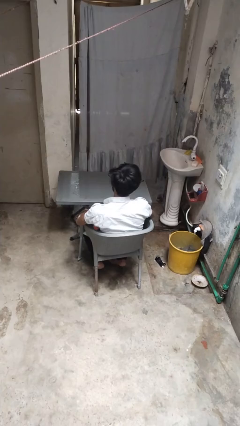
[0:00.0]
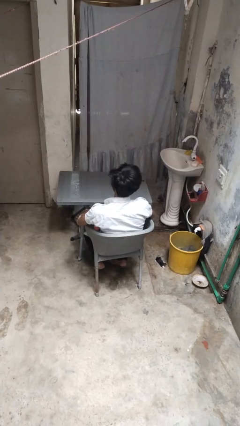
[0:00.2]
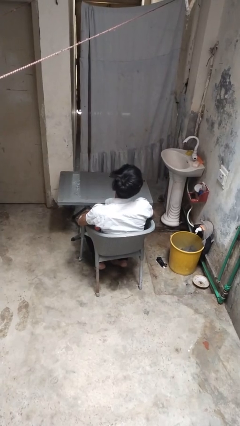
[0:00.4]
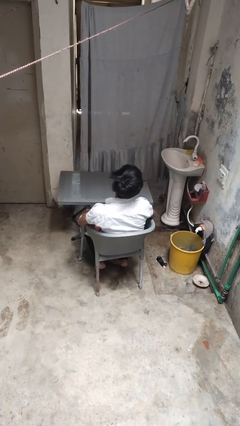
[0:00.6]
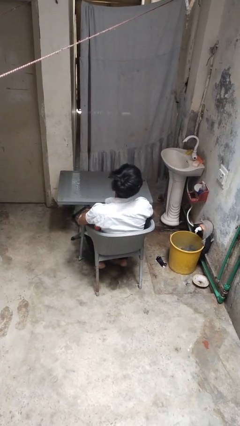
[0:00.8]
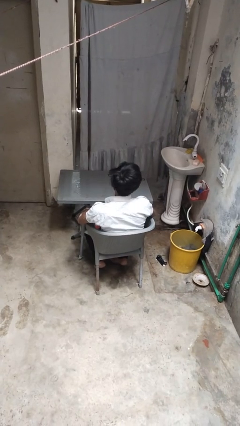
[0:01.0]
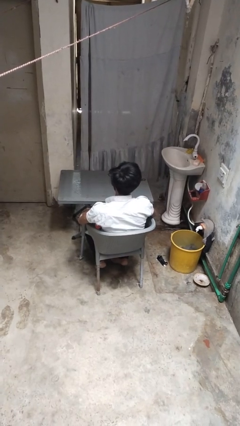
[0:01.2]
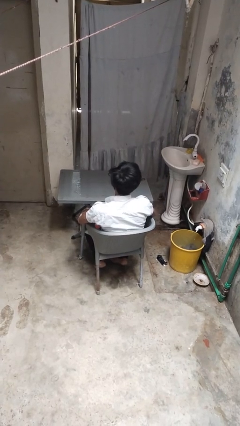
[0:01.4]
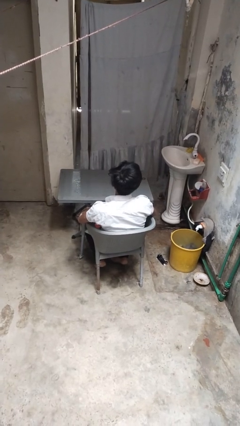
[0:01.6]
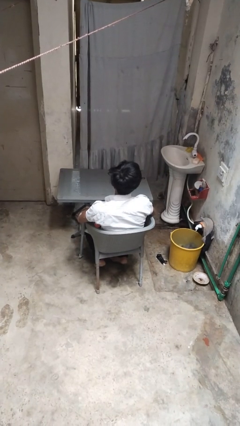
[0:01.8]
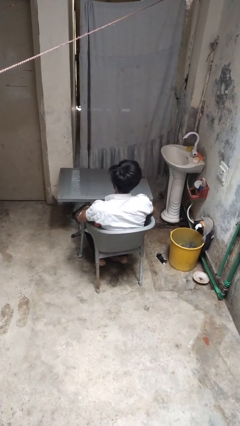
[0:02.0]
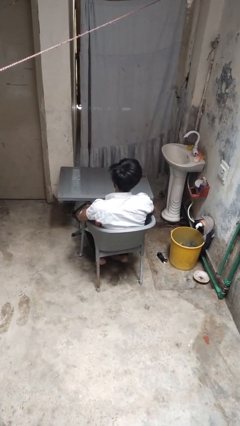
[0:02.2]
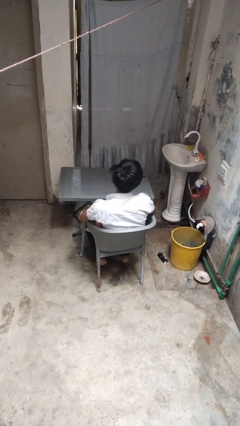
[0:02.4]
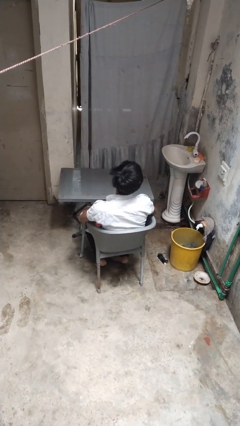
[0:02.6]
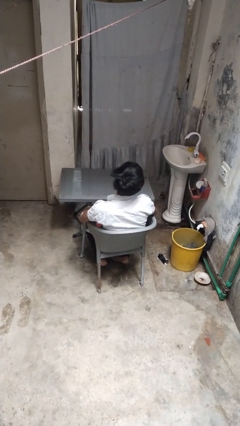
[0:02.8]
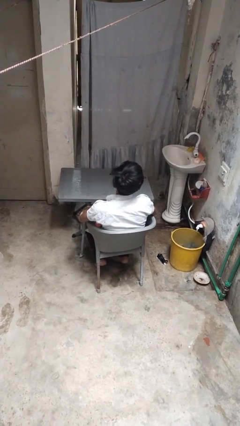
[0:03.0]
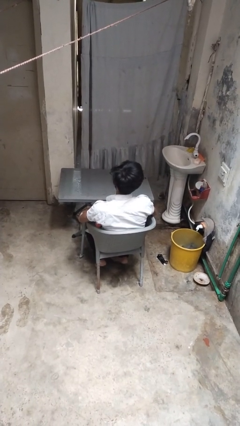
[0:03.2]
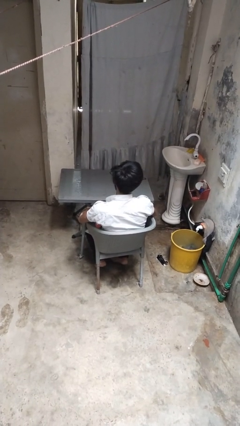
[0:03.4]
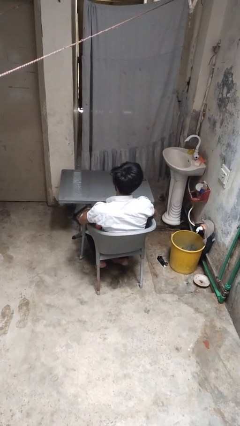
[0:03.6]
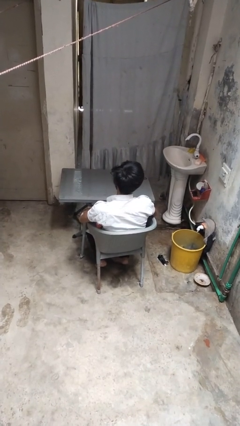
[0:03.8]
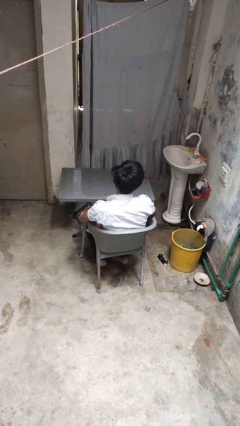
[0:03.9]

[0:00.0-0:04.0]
person nods head

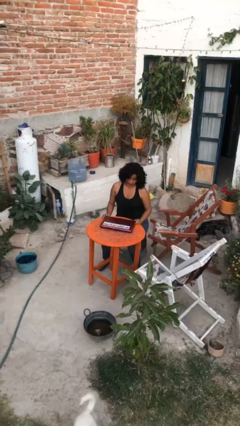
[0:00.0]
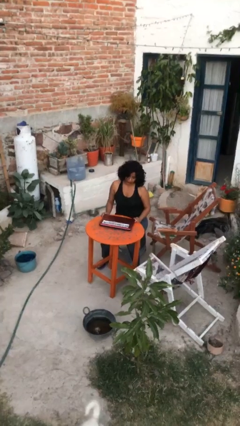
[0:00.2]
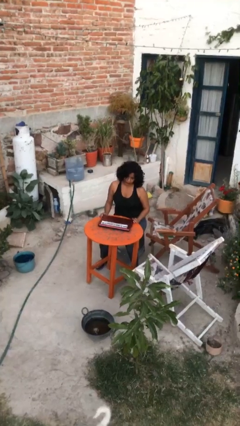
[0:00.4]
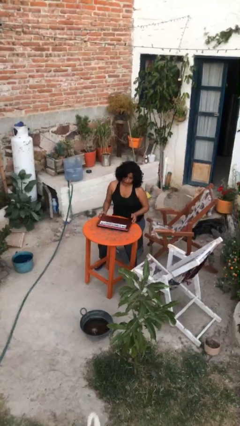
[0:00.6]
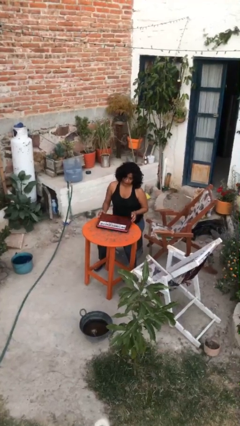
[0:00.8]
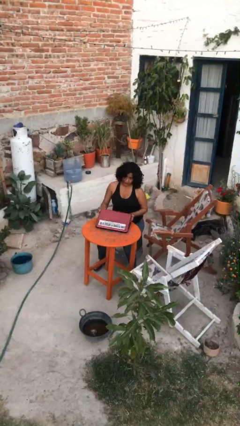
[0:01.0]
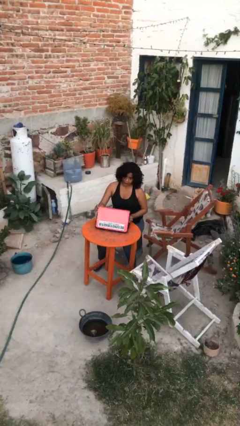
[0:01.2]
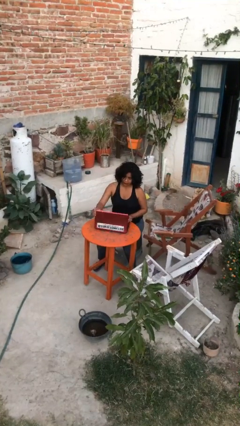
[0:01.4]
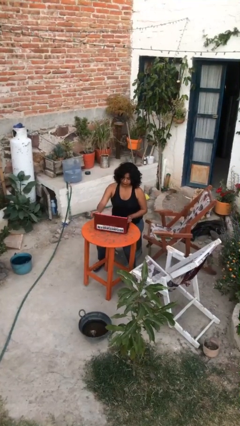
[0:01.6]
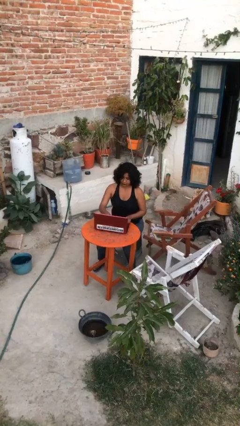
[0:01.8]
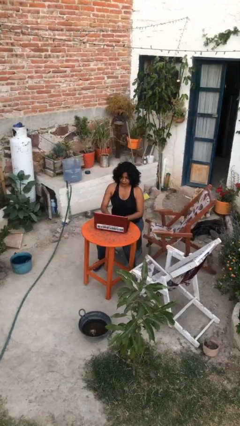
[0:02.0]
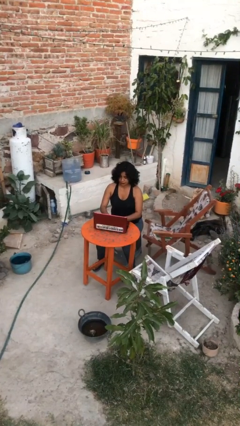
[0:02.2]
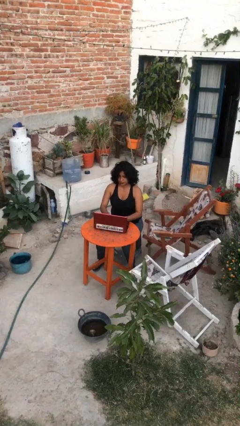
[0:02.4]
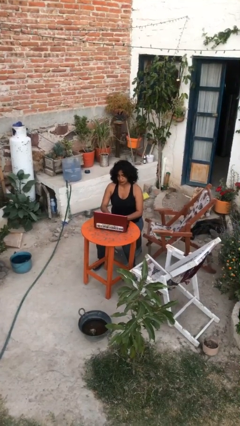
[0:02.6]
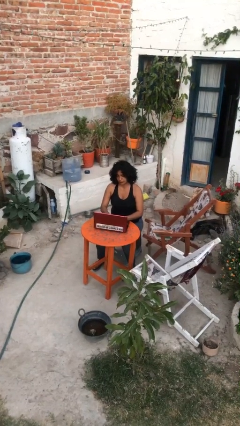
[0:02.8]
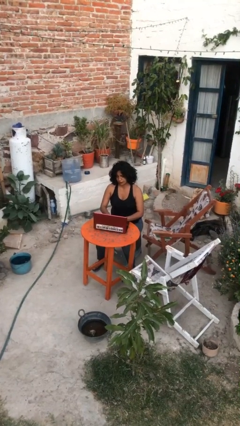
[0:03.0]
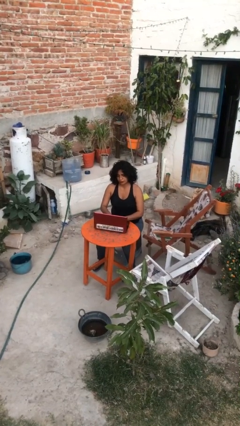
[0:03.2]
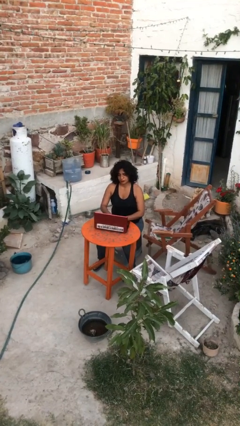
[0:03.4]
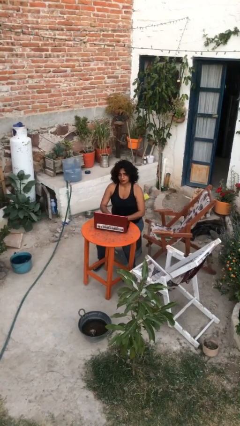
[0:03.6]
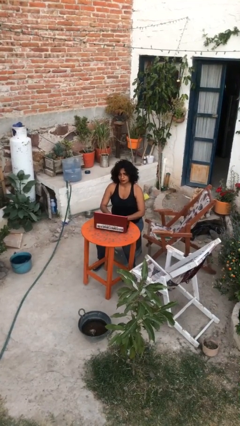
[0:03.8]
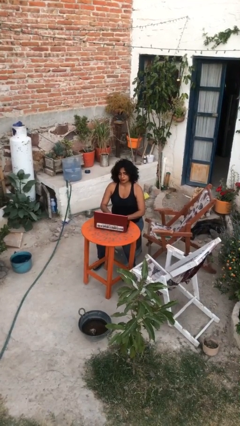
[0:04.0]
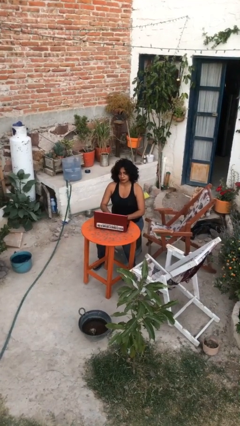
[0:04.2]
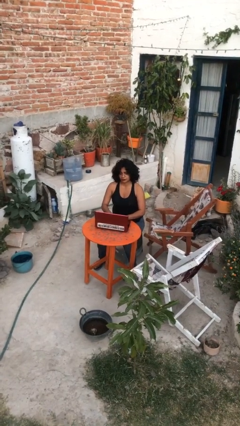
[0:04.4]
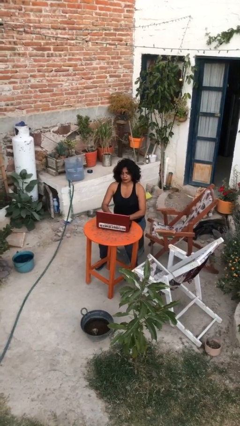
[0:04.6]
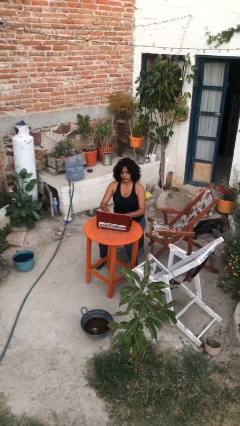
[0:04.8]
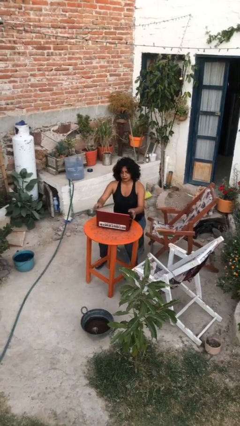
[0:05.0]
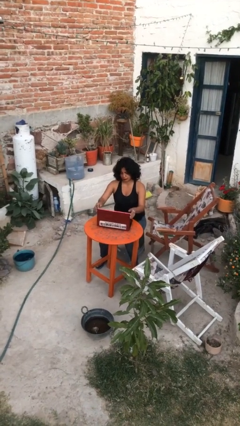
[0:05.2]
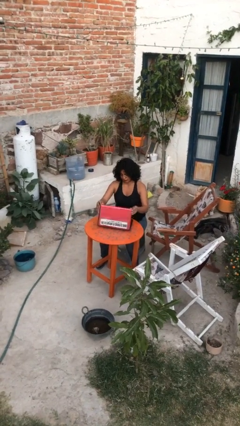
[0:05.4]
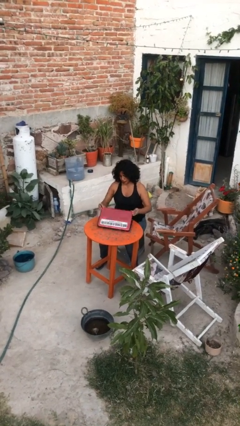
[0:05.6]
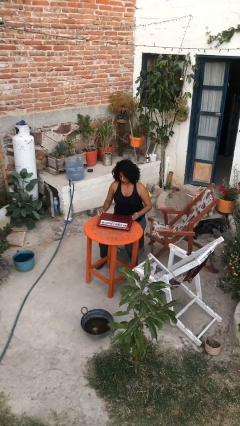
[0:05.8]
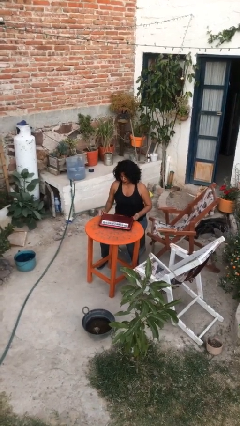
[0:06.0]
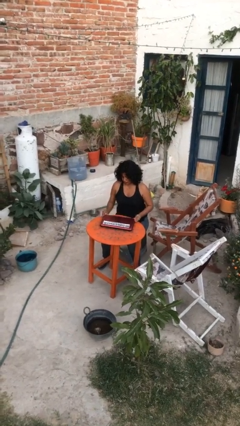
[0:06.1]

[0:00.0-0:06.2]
person interacts with laptop

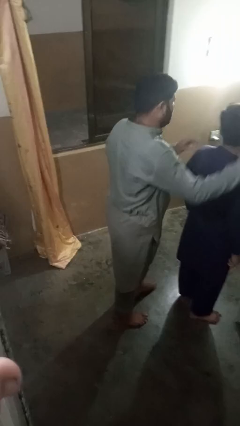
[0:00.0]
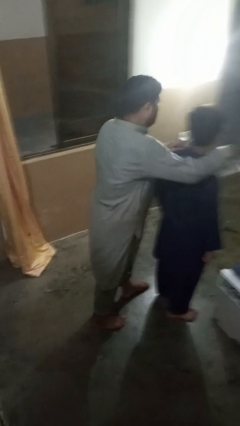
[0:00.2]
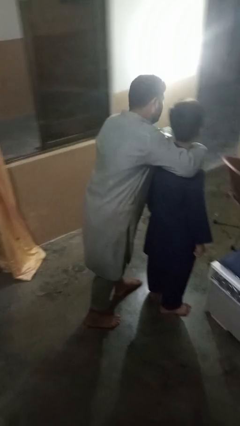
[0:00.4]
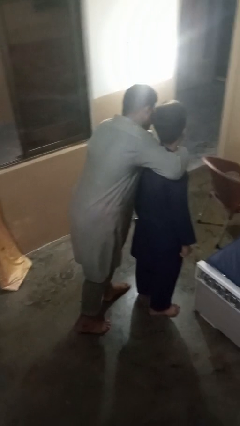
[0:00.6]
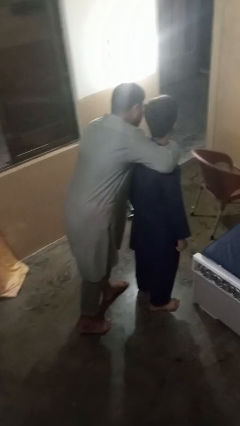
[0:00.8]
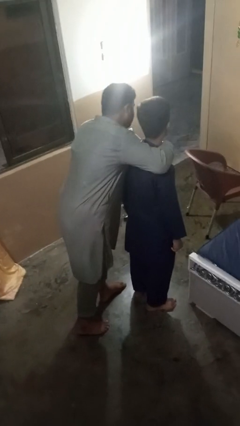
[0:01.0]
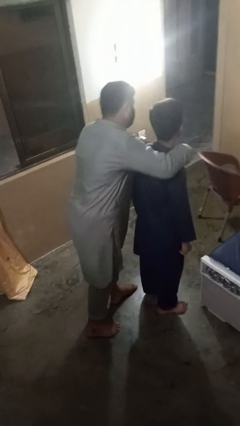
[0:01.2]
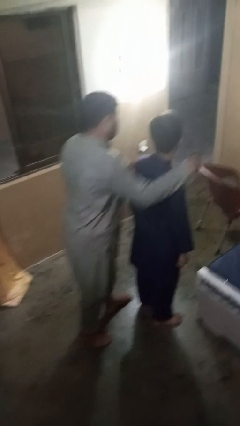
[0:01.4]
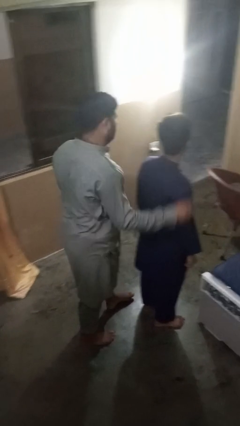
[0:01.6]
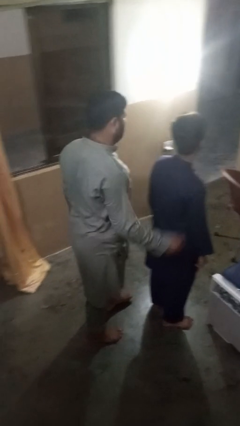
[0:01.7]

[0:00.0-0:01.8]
person hugs person from behind

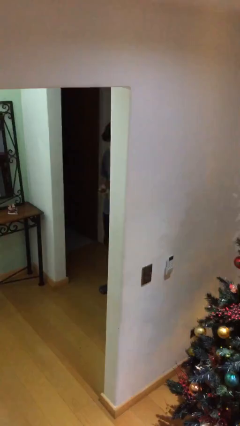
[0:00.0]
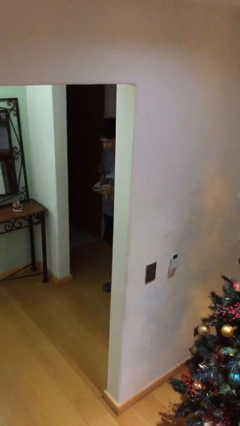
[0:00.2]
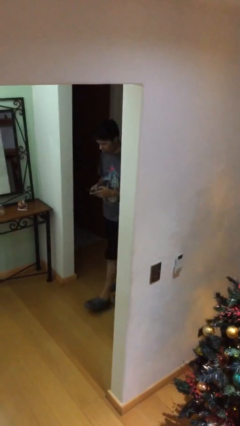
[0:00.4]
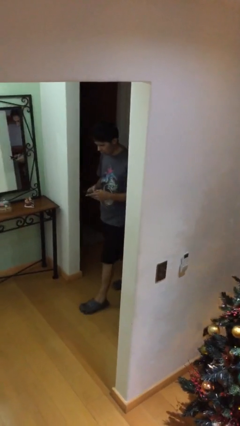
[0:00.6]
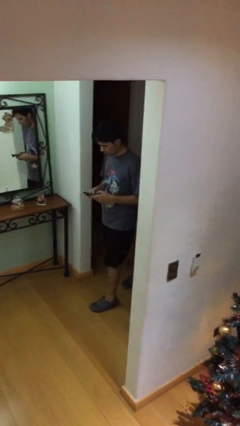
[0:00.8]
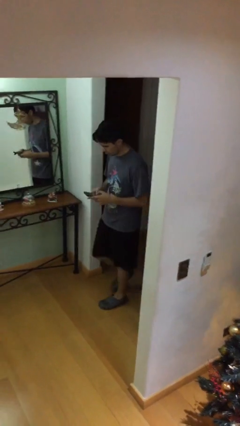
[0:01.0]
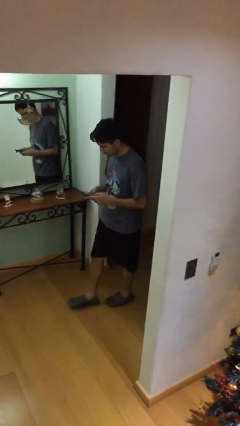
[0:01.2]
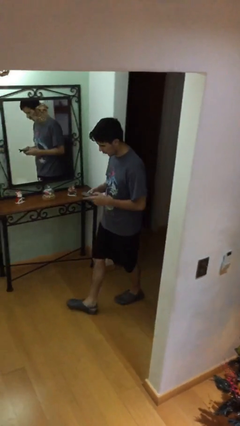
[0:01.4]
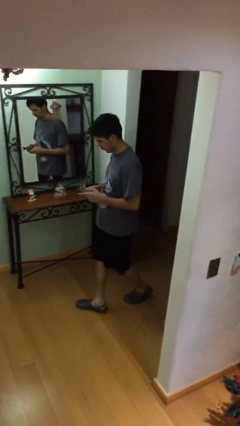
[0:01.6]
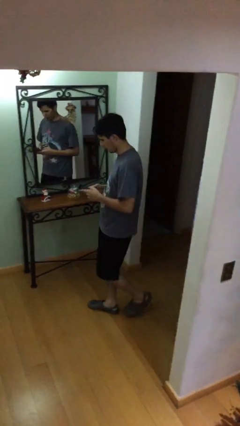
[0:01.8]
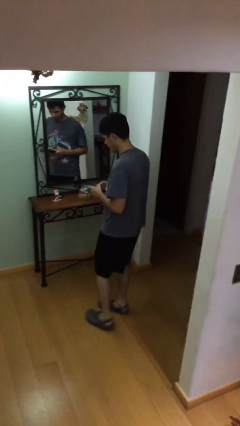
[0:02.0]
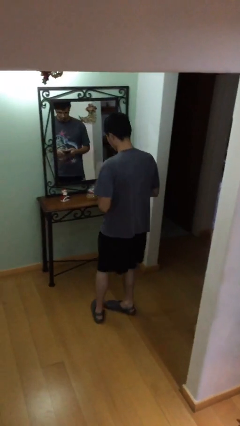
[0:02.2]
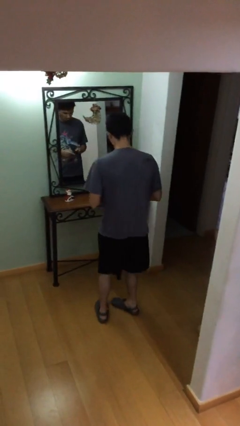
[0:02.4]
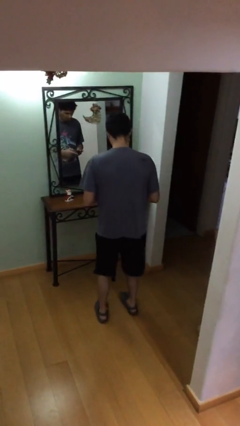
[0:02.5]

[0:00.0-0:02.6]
person enters scene through structure

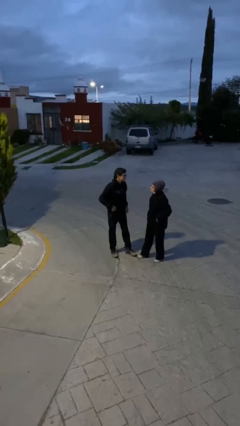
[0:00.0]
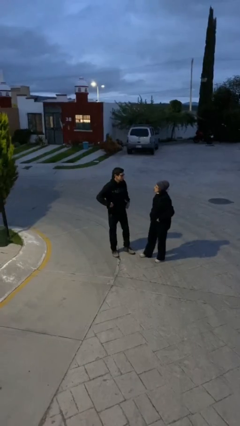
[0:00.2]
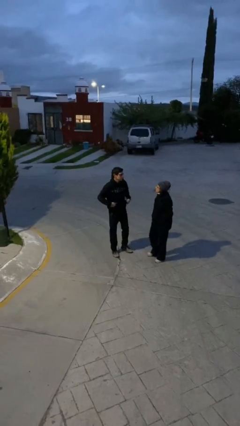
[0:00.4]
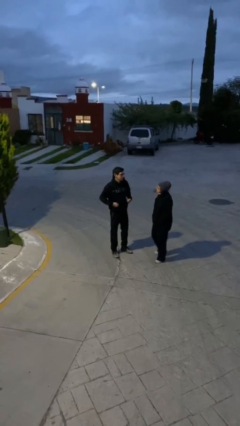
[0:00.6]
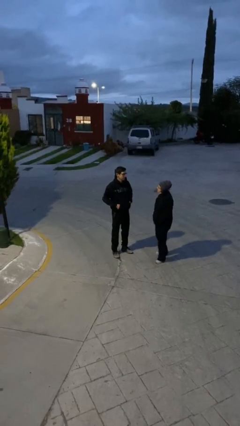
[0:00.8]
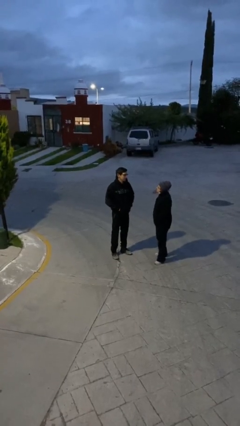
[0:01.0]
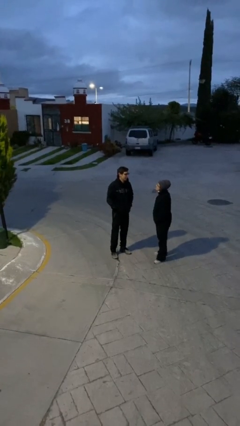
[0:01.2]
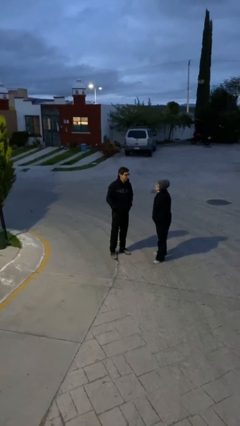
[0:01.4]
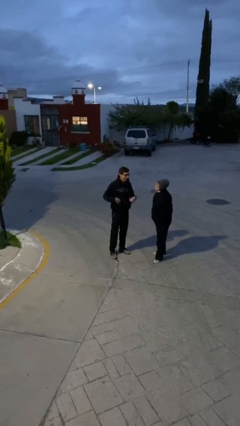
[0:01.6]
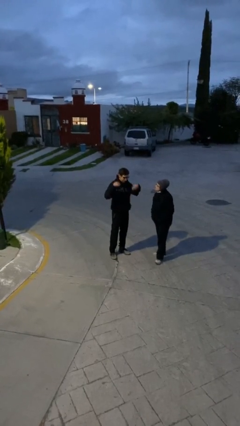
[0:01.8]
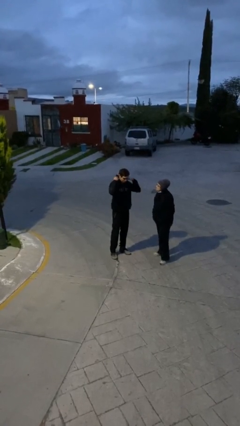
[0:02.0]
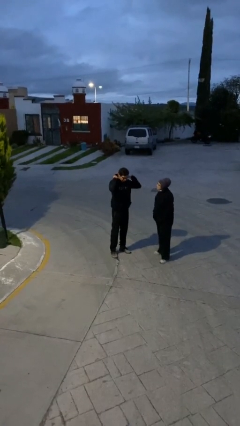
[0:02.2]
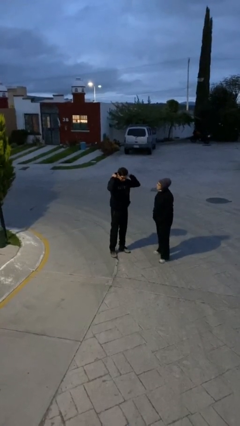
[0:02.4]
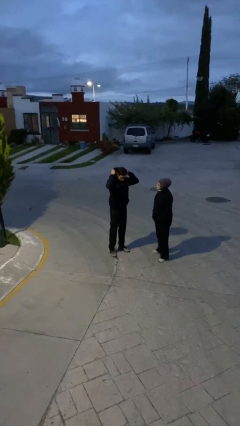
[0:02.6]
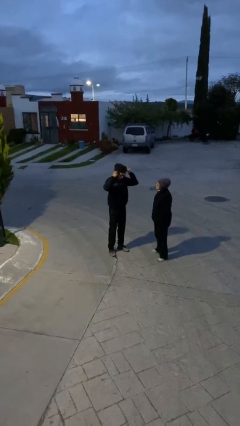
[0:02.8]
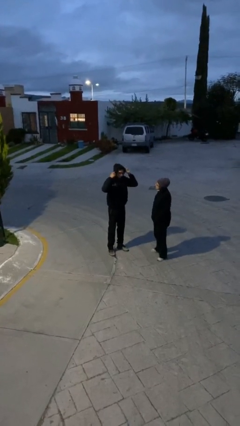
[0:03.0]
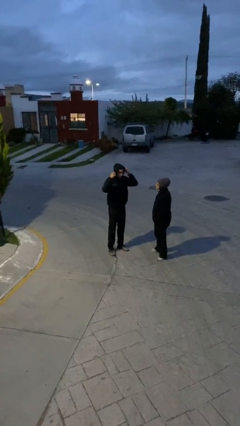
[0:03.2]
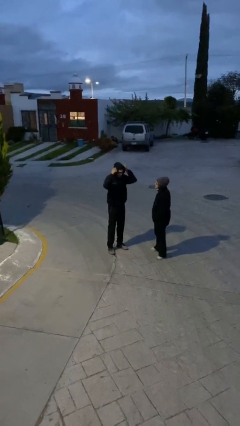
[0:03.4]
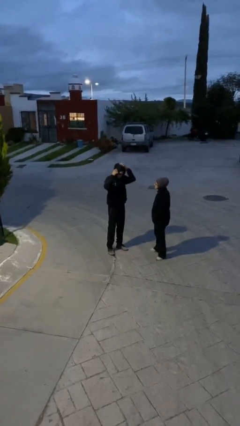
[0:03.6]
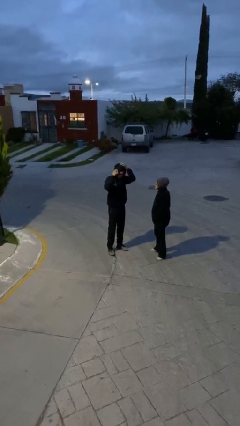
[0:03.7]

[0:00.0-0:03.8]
person talks to person
